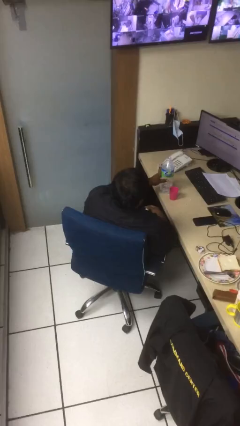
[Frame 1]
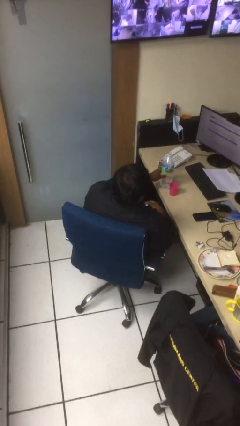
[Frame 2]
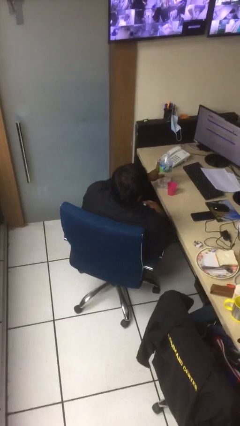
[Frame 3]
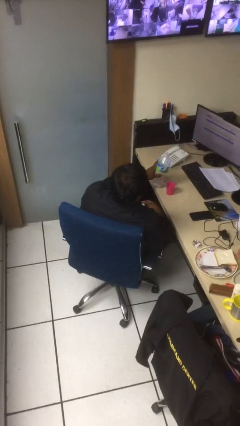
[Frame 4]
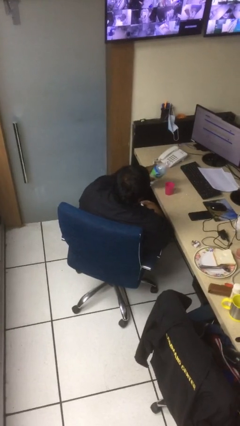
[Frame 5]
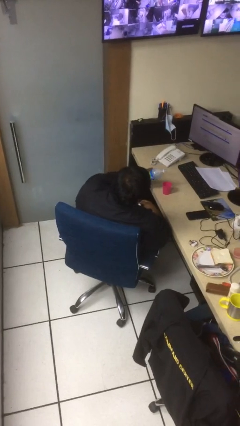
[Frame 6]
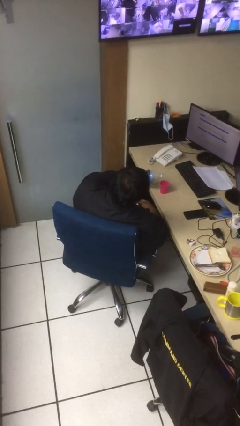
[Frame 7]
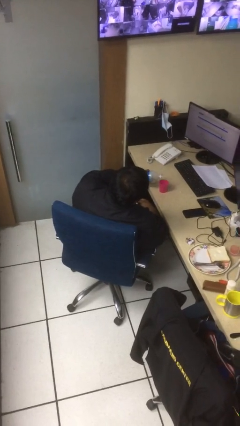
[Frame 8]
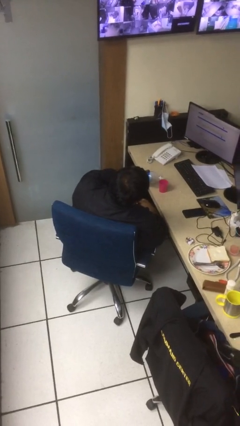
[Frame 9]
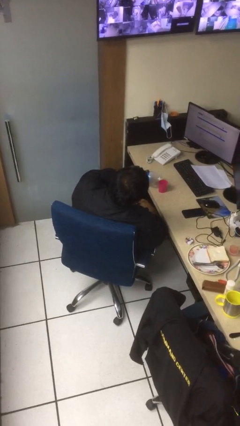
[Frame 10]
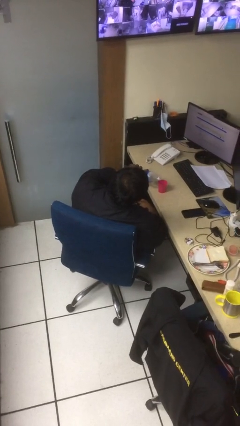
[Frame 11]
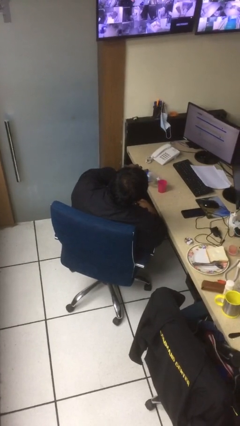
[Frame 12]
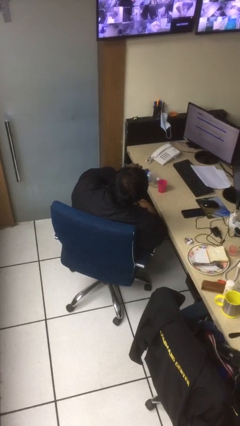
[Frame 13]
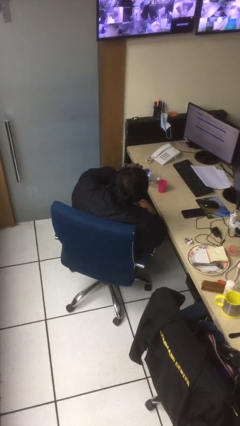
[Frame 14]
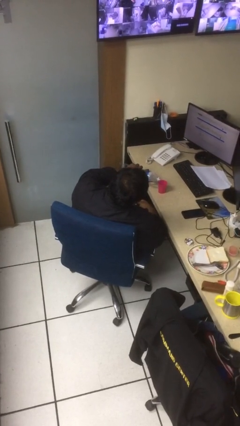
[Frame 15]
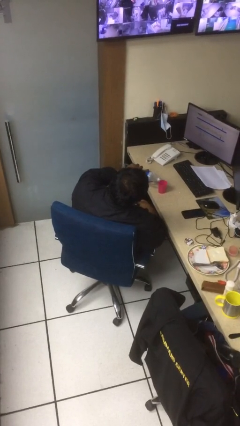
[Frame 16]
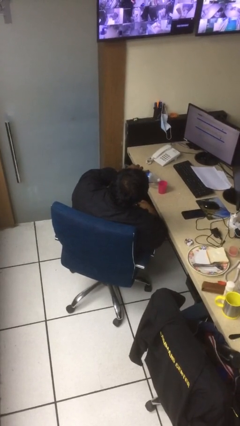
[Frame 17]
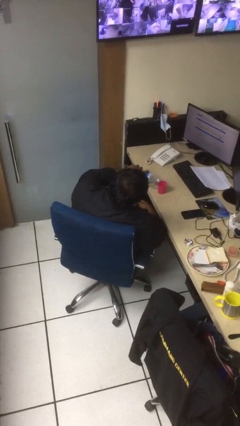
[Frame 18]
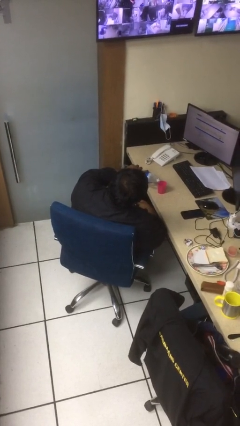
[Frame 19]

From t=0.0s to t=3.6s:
person pours liquid into cup

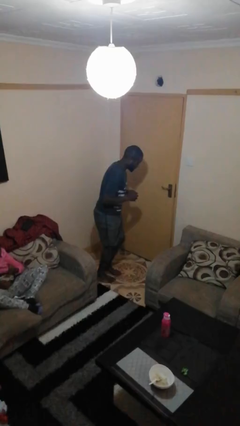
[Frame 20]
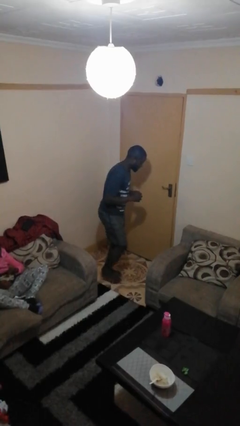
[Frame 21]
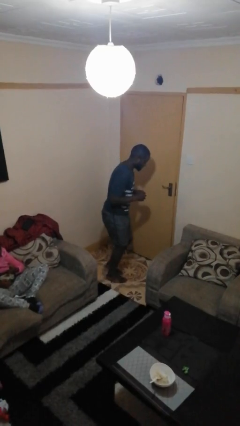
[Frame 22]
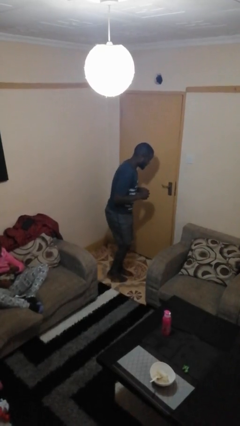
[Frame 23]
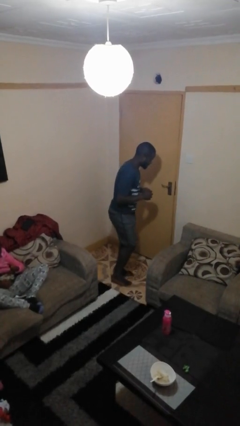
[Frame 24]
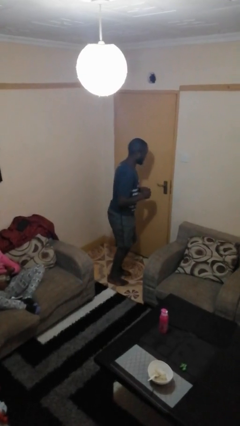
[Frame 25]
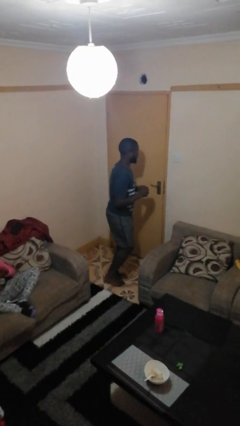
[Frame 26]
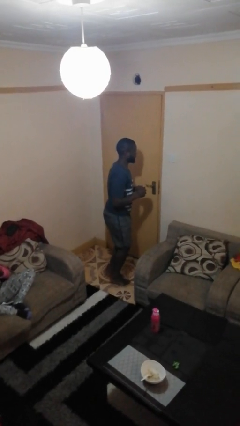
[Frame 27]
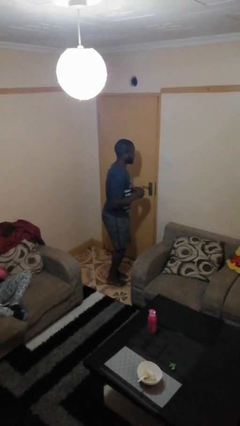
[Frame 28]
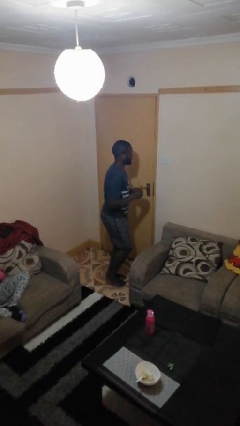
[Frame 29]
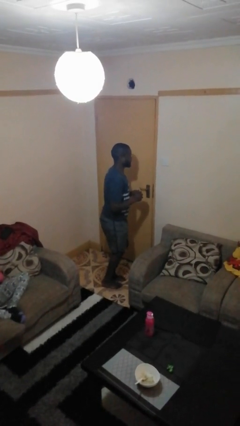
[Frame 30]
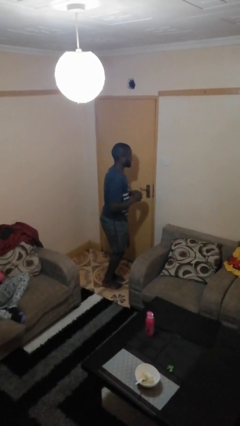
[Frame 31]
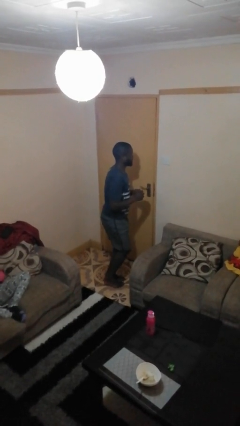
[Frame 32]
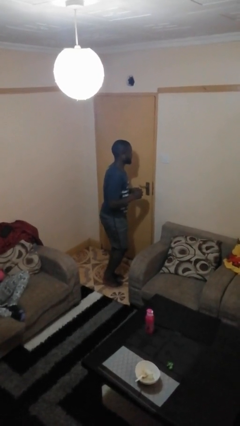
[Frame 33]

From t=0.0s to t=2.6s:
person walks tiptoe

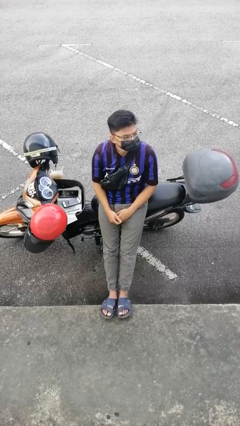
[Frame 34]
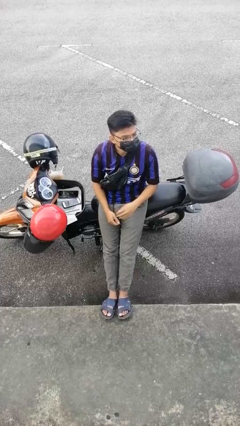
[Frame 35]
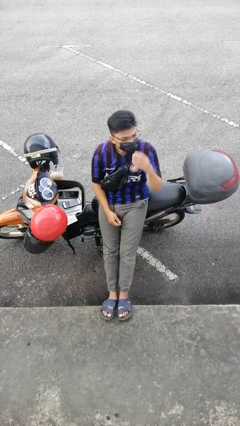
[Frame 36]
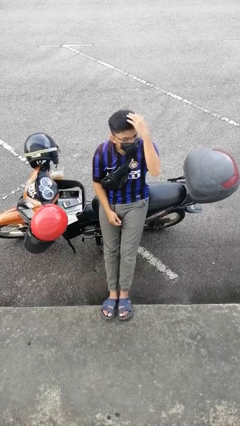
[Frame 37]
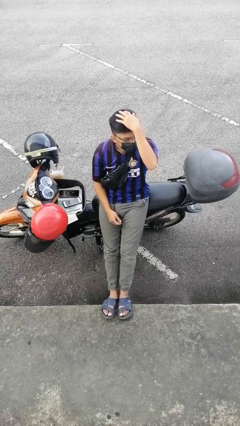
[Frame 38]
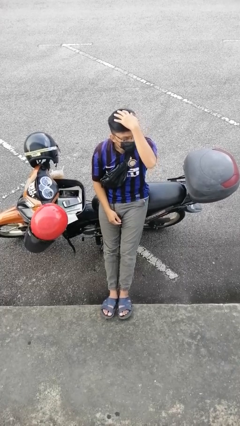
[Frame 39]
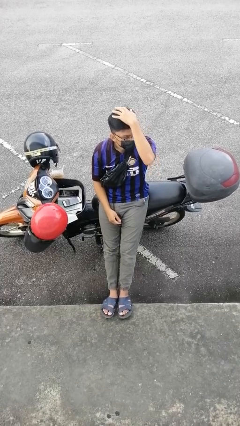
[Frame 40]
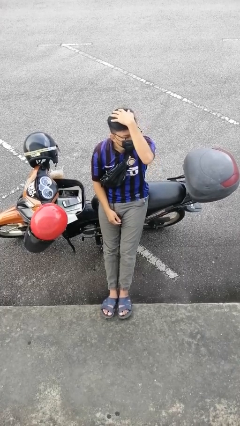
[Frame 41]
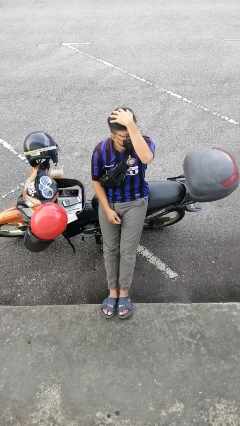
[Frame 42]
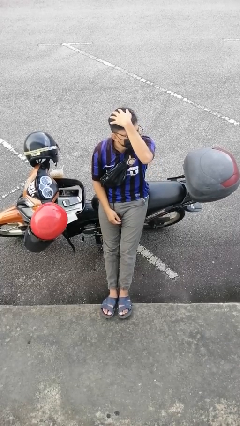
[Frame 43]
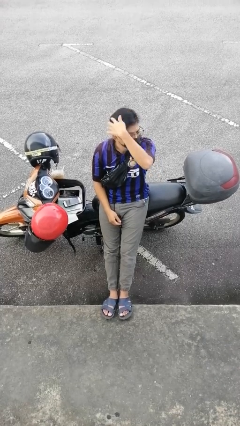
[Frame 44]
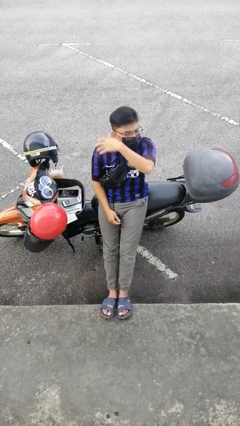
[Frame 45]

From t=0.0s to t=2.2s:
person pats head

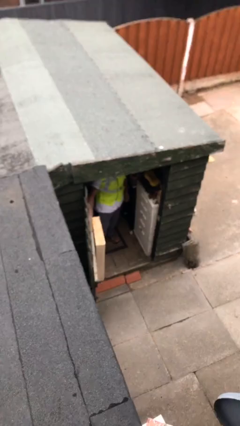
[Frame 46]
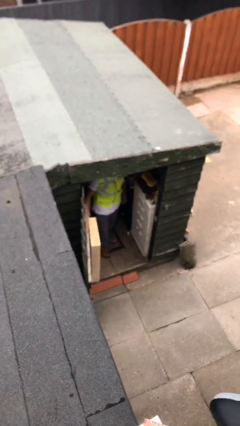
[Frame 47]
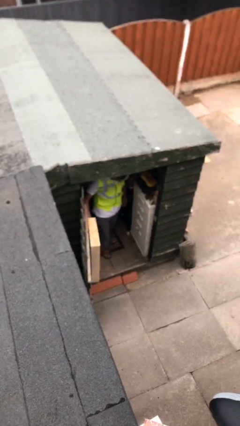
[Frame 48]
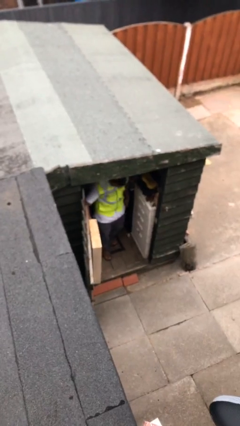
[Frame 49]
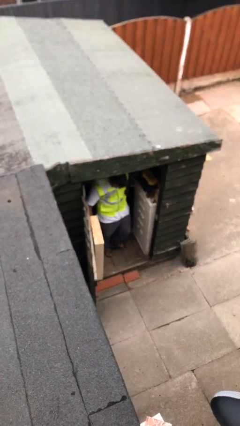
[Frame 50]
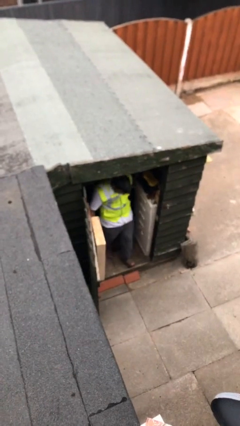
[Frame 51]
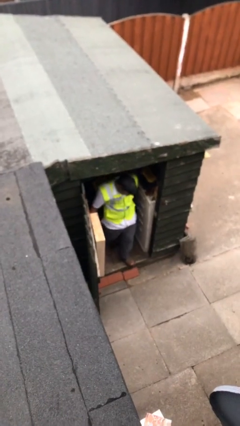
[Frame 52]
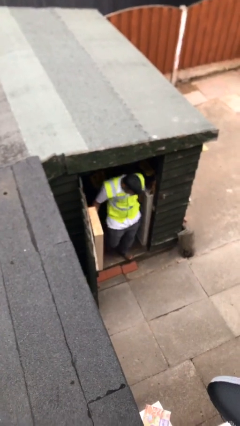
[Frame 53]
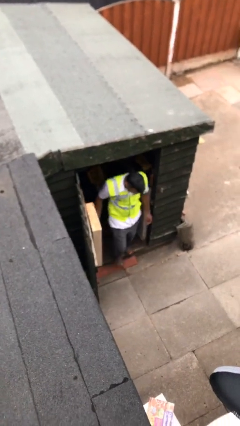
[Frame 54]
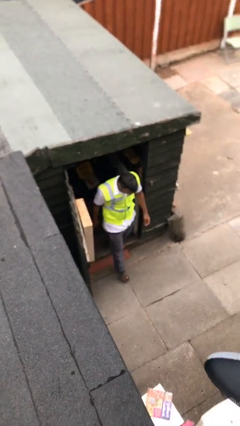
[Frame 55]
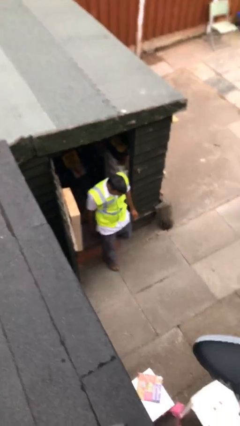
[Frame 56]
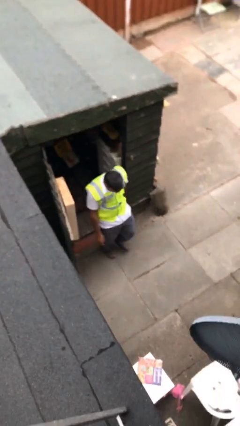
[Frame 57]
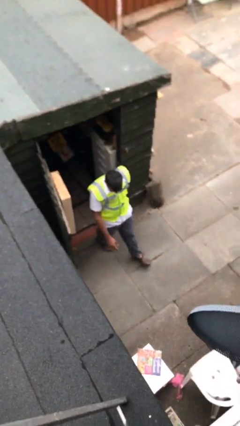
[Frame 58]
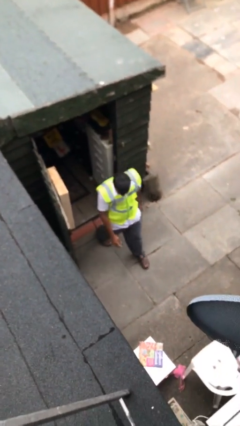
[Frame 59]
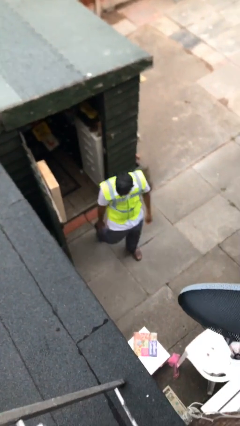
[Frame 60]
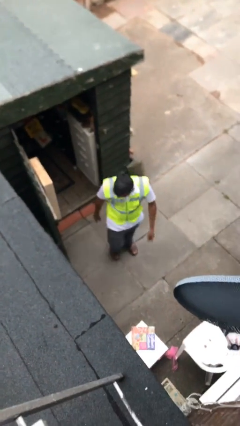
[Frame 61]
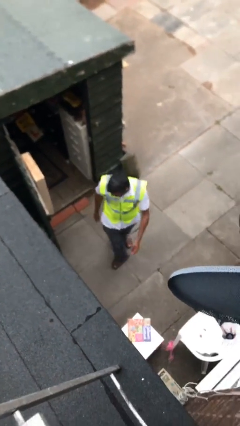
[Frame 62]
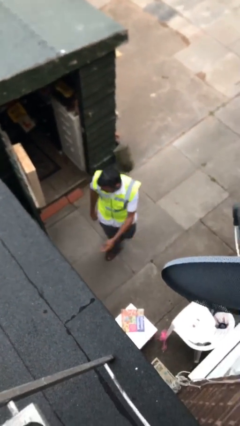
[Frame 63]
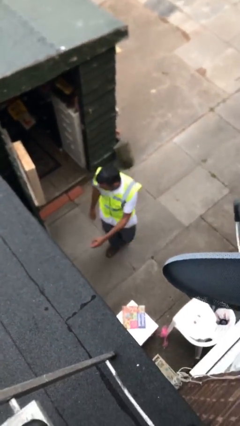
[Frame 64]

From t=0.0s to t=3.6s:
person enters scene through structure

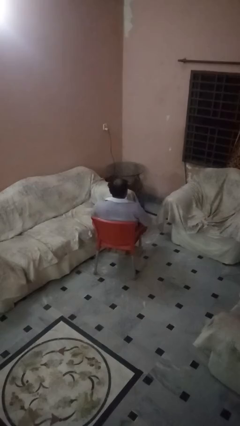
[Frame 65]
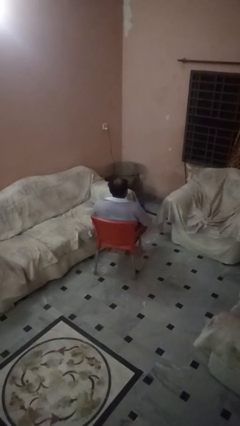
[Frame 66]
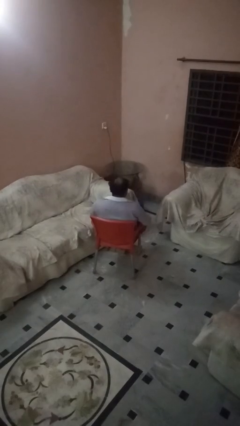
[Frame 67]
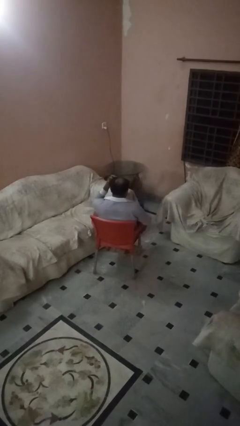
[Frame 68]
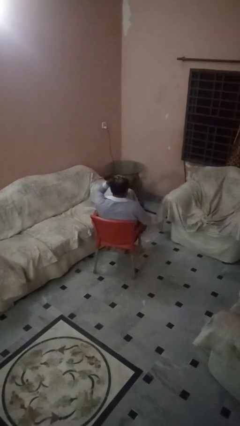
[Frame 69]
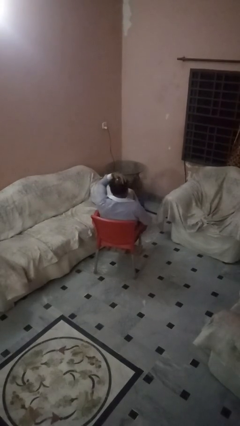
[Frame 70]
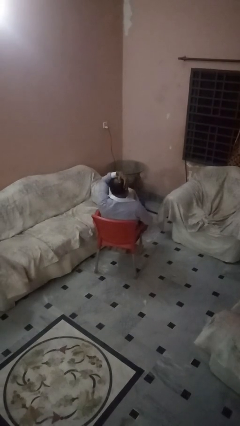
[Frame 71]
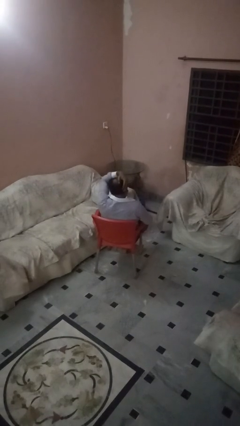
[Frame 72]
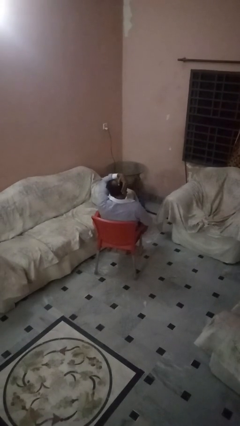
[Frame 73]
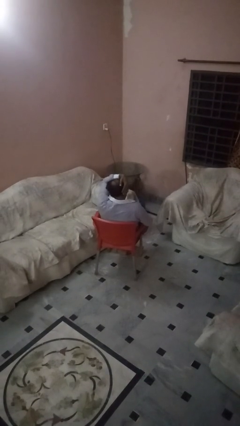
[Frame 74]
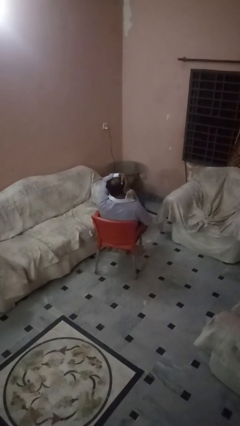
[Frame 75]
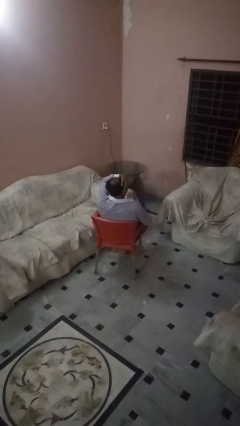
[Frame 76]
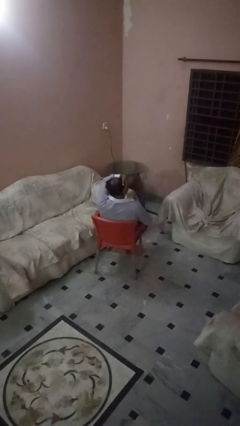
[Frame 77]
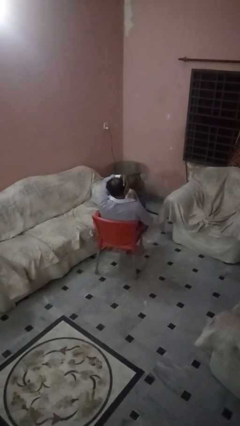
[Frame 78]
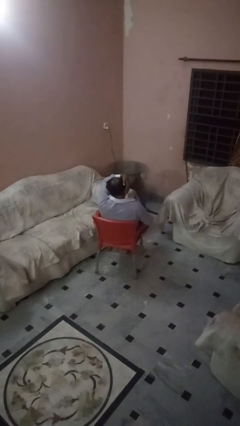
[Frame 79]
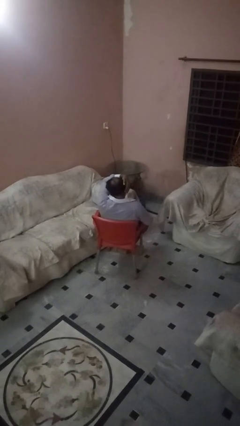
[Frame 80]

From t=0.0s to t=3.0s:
person strokes hair

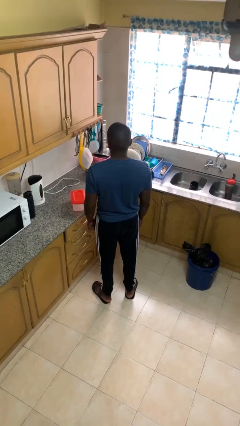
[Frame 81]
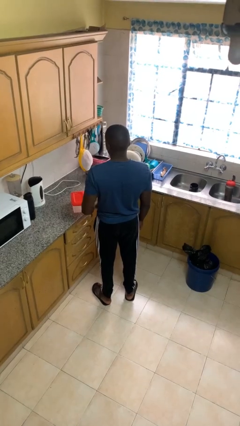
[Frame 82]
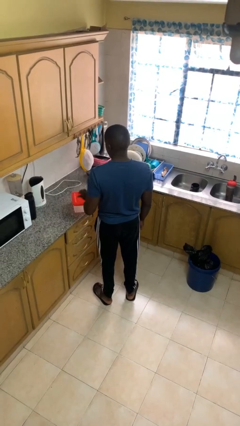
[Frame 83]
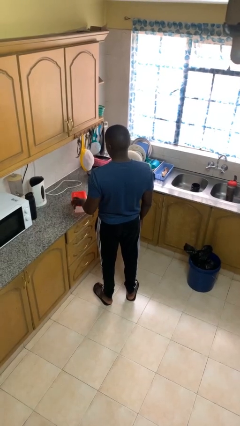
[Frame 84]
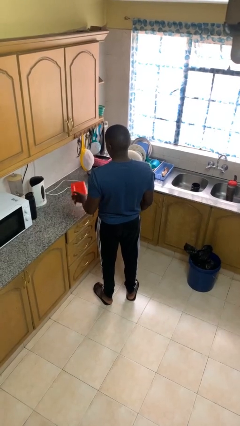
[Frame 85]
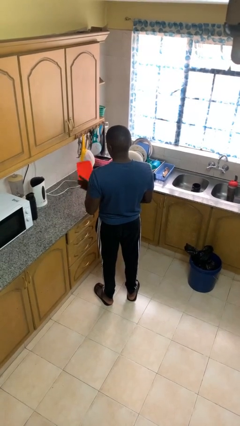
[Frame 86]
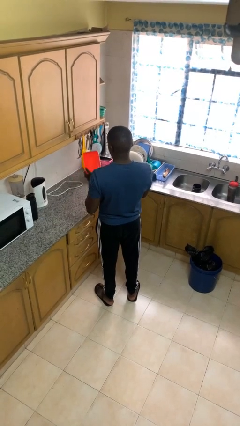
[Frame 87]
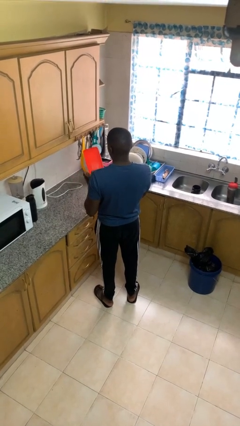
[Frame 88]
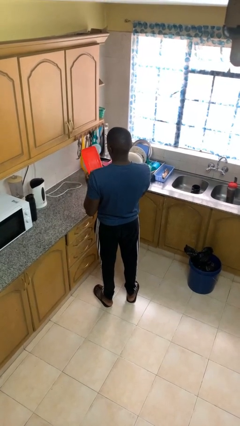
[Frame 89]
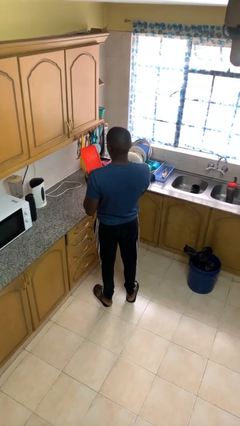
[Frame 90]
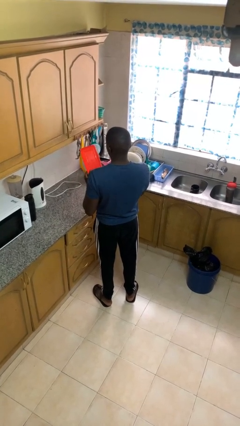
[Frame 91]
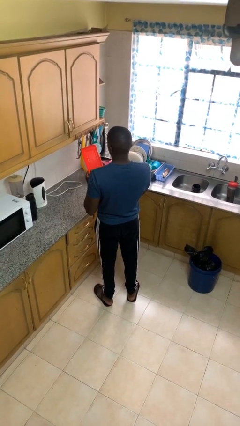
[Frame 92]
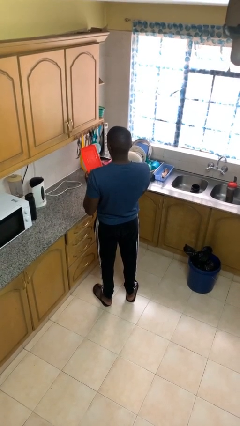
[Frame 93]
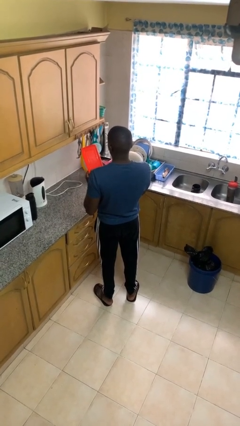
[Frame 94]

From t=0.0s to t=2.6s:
person picks up object from countertop
